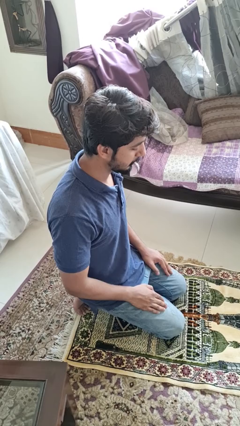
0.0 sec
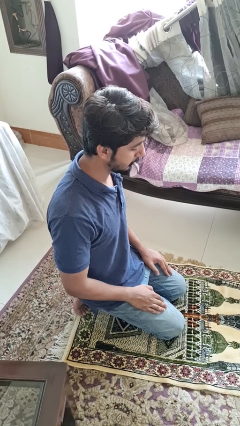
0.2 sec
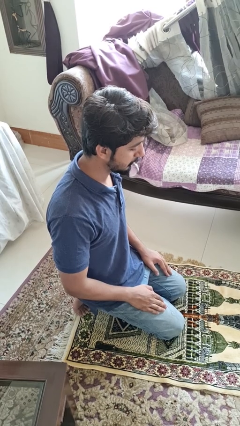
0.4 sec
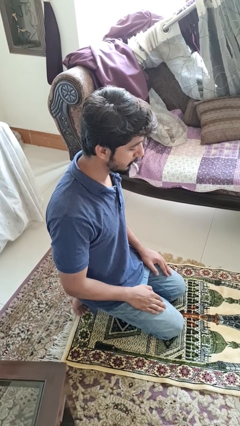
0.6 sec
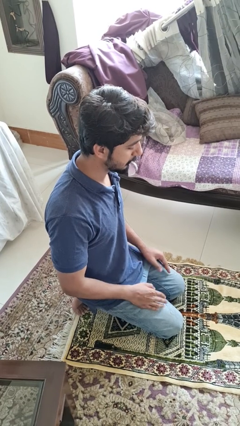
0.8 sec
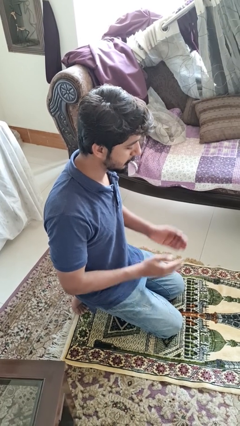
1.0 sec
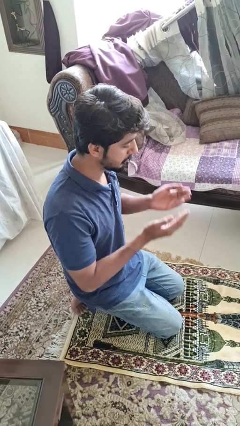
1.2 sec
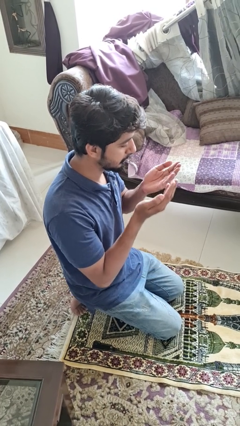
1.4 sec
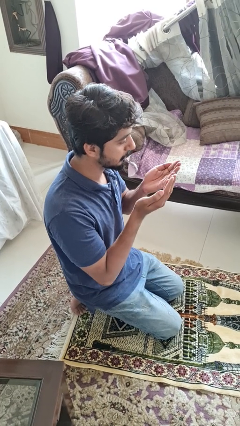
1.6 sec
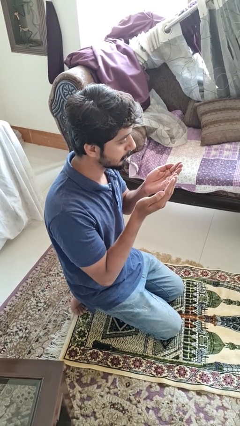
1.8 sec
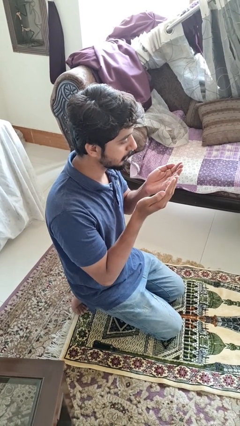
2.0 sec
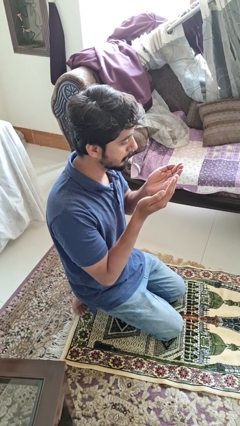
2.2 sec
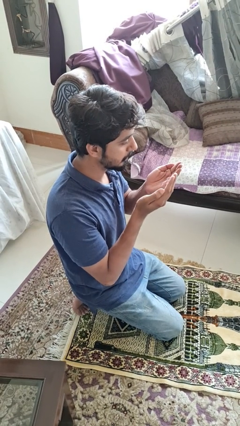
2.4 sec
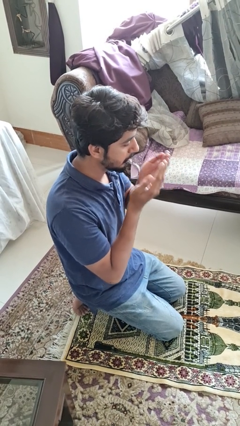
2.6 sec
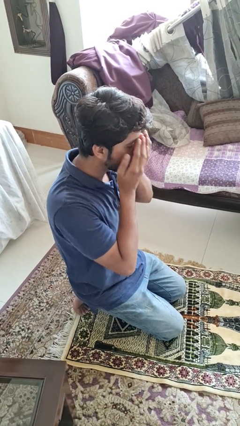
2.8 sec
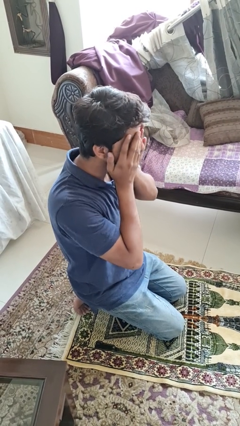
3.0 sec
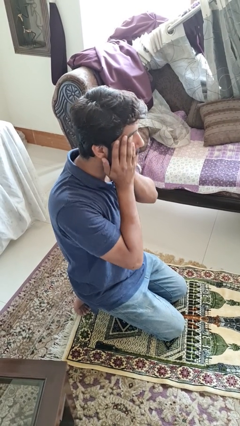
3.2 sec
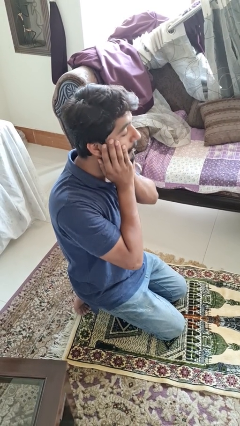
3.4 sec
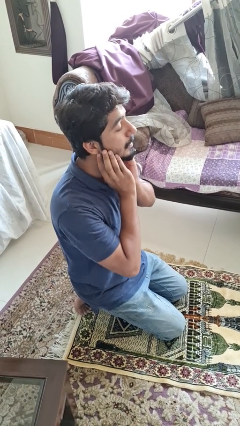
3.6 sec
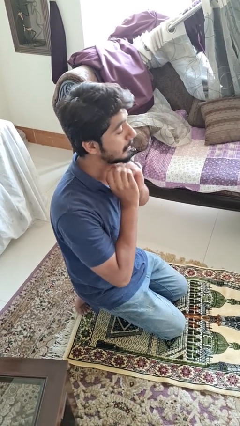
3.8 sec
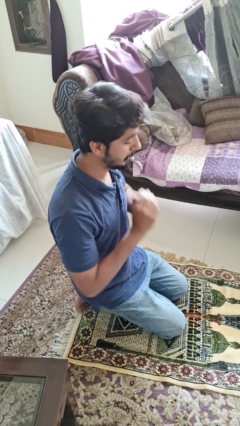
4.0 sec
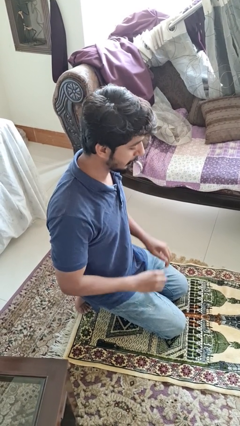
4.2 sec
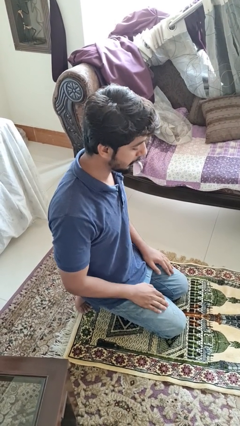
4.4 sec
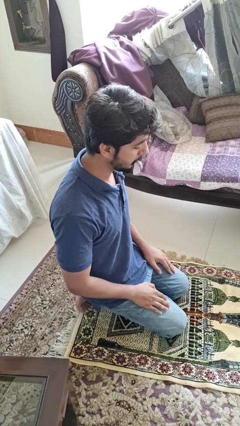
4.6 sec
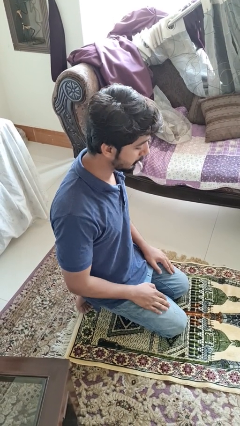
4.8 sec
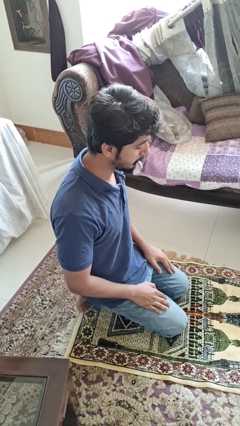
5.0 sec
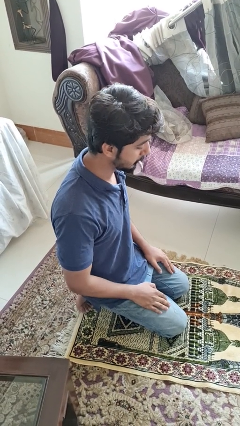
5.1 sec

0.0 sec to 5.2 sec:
person prays

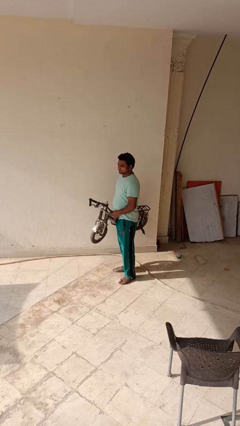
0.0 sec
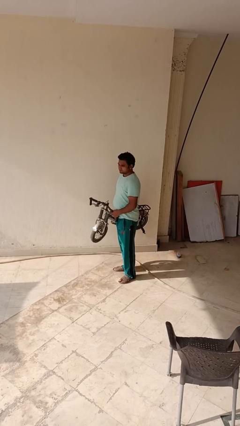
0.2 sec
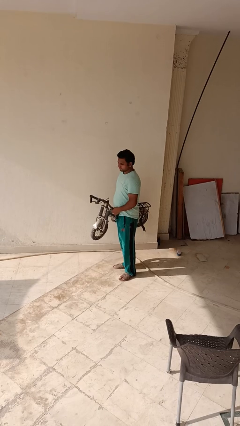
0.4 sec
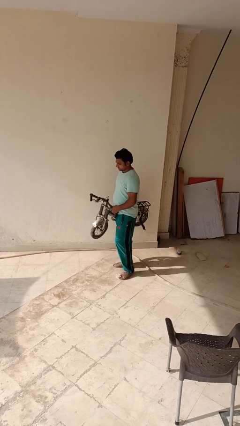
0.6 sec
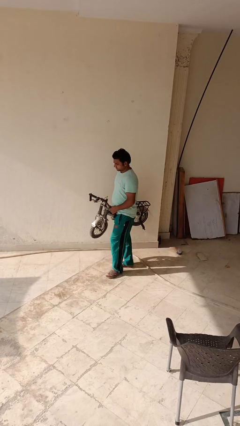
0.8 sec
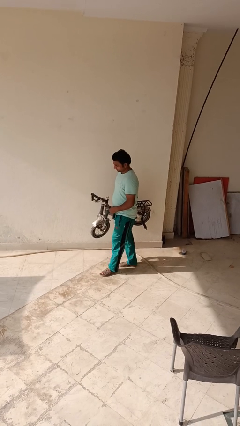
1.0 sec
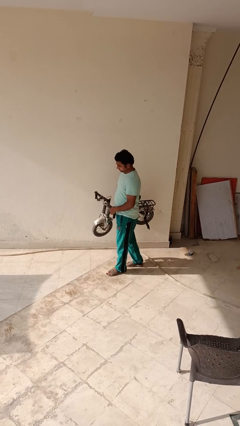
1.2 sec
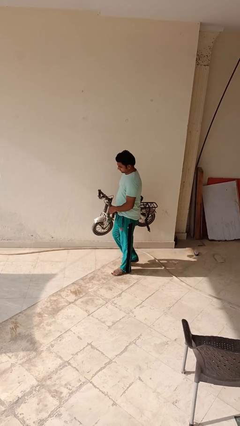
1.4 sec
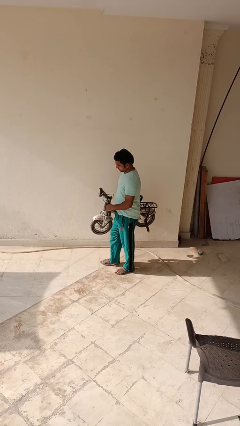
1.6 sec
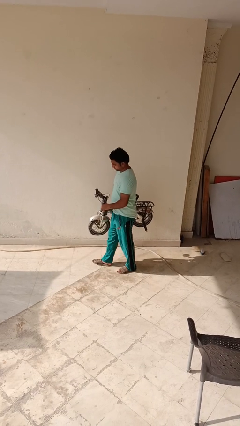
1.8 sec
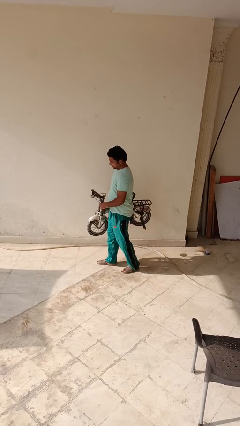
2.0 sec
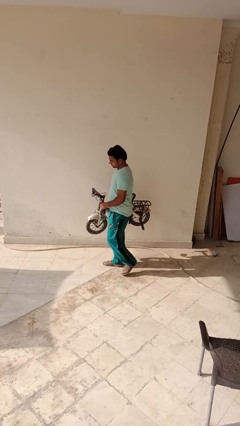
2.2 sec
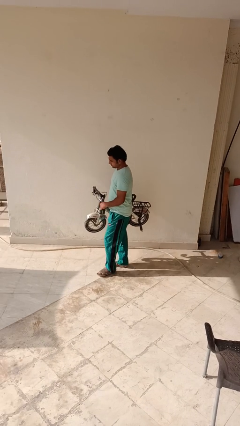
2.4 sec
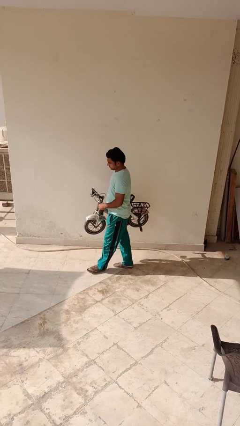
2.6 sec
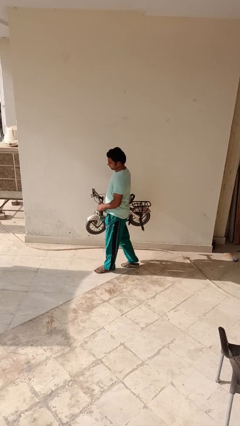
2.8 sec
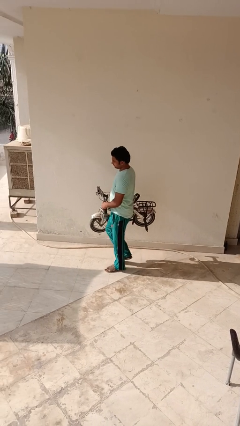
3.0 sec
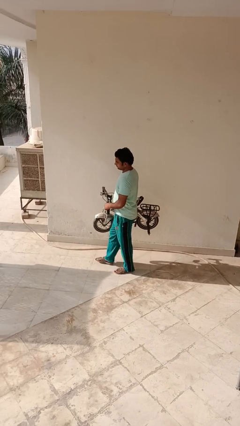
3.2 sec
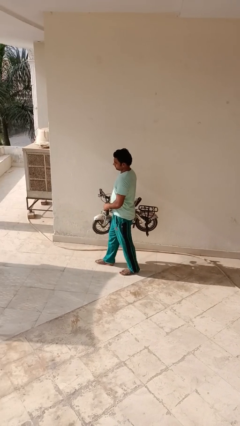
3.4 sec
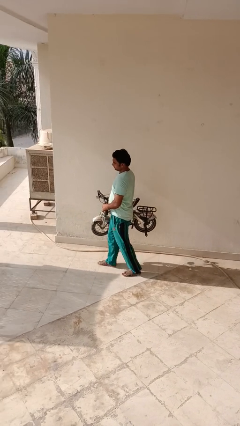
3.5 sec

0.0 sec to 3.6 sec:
person carries bicycle

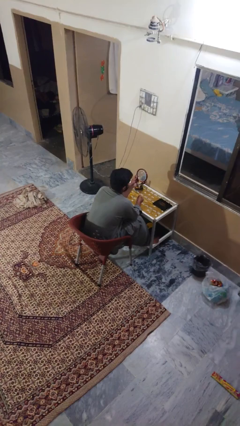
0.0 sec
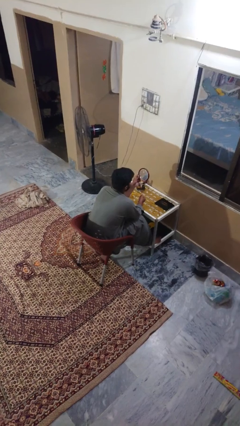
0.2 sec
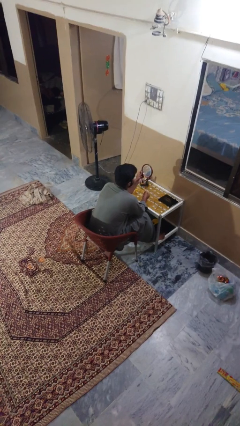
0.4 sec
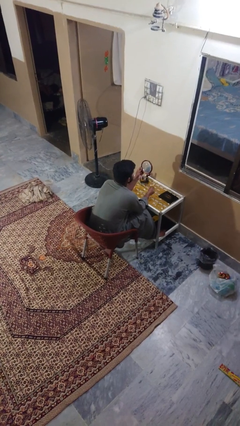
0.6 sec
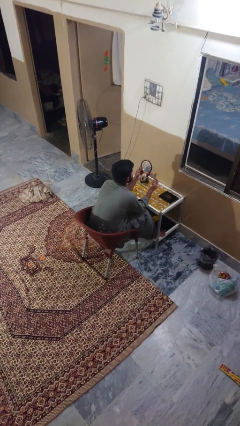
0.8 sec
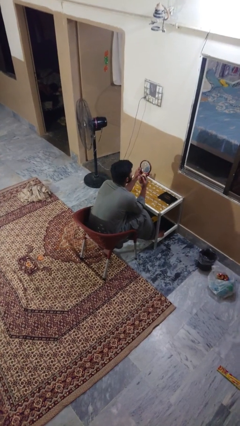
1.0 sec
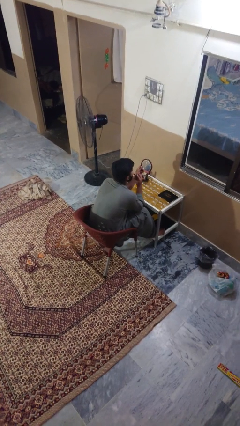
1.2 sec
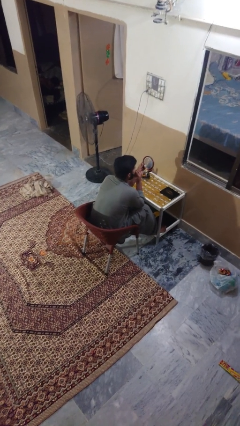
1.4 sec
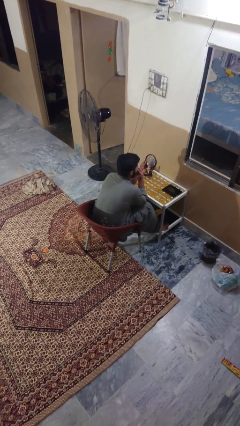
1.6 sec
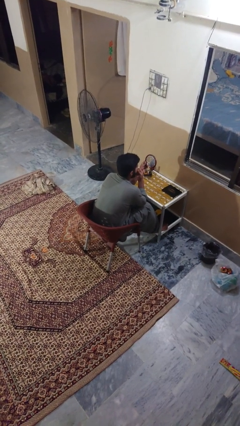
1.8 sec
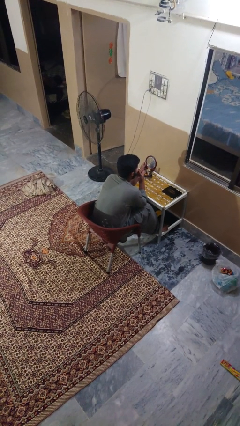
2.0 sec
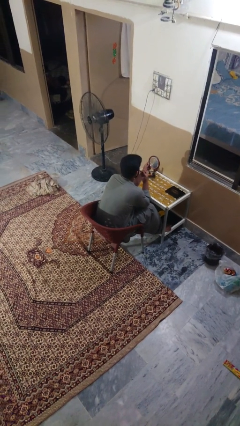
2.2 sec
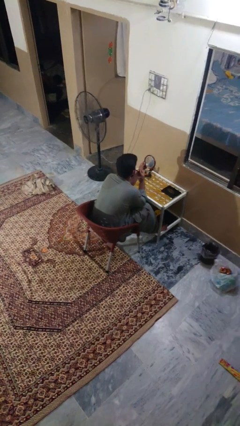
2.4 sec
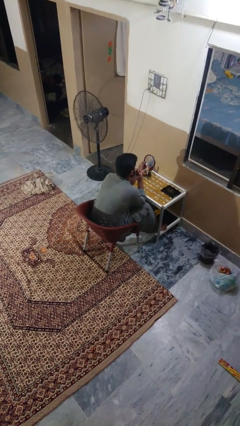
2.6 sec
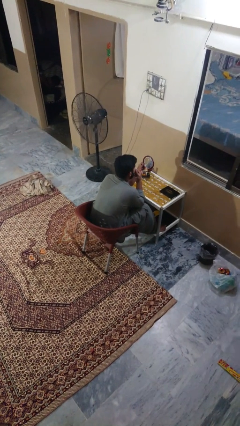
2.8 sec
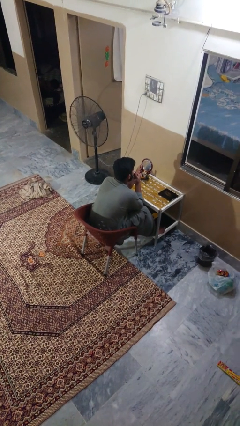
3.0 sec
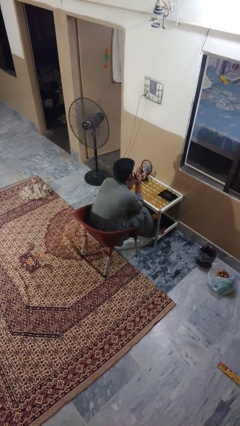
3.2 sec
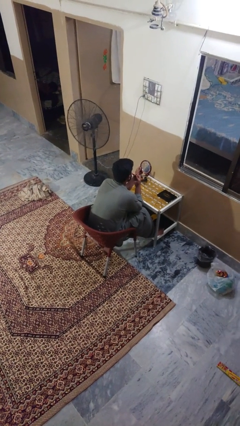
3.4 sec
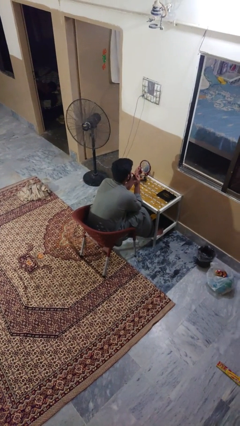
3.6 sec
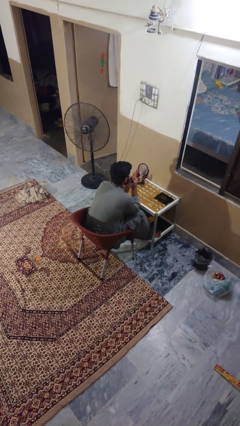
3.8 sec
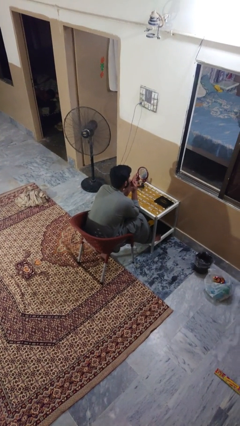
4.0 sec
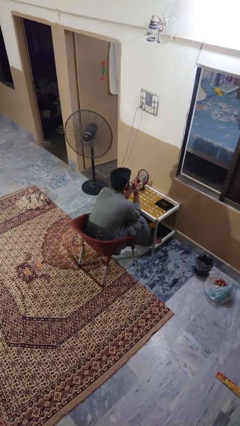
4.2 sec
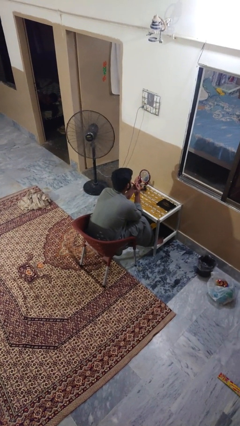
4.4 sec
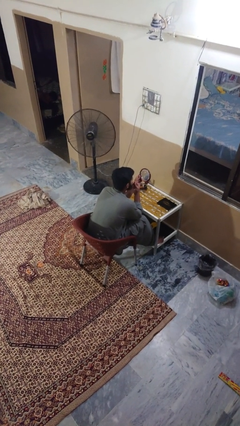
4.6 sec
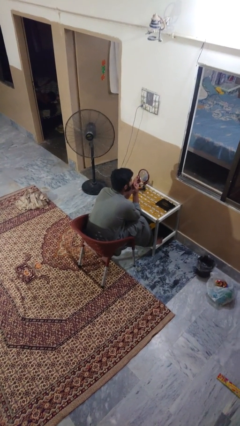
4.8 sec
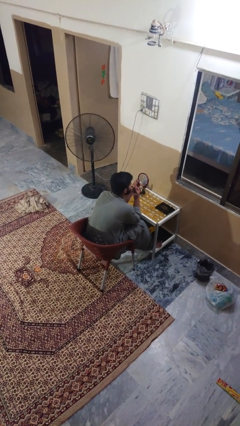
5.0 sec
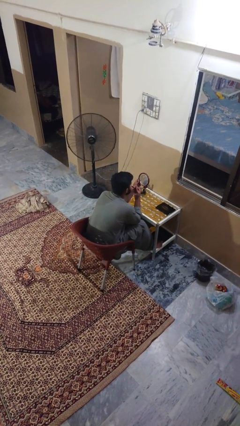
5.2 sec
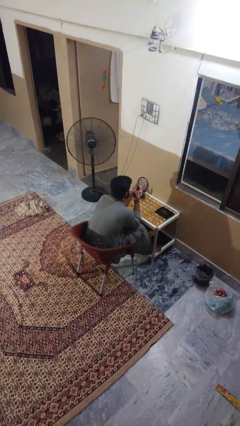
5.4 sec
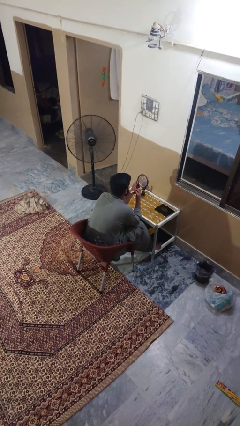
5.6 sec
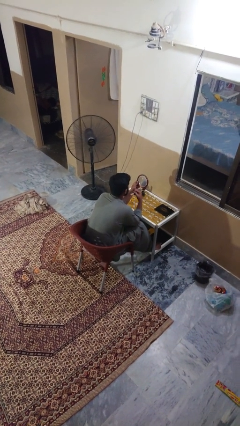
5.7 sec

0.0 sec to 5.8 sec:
person applies lip makeup

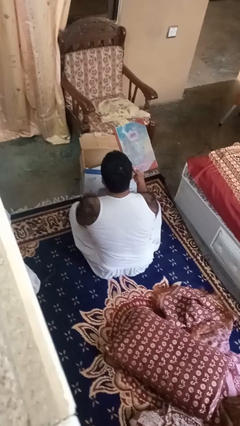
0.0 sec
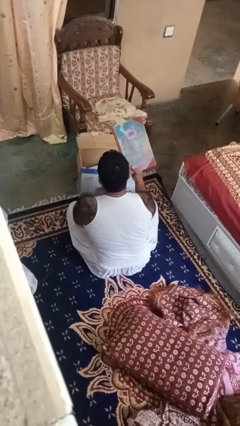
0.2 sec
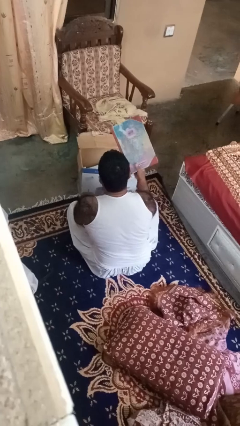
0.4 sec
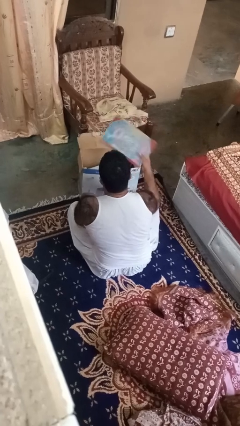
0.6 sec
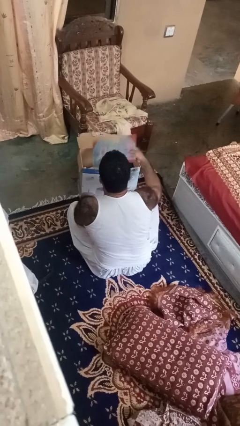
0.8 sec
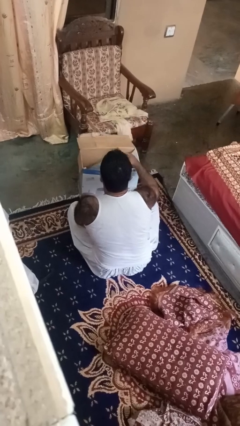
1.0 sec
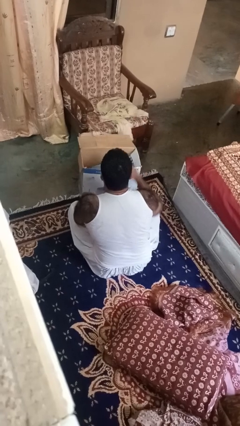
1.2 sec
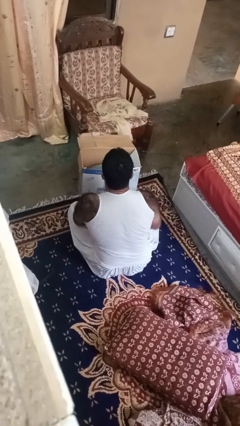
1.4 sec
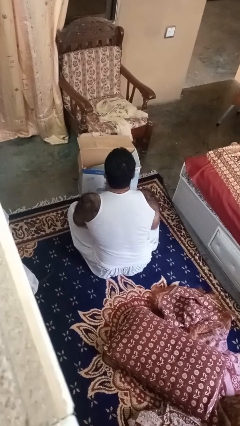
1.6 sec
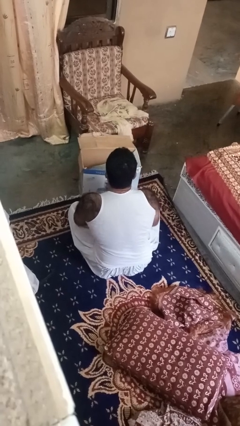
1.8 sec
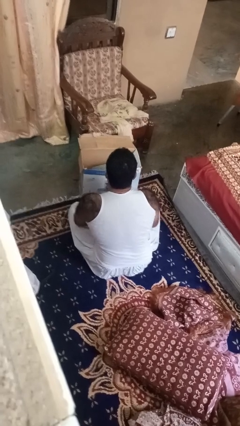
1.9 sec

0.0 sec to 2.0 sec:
person puts object into box

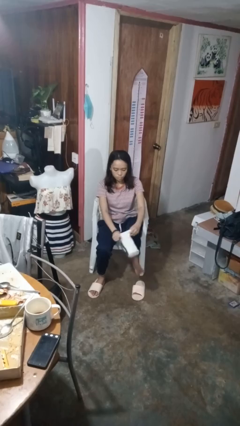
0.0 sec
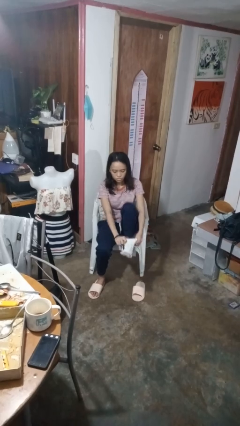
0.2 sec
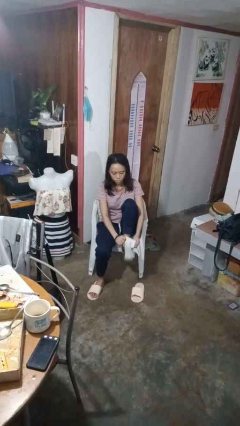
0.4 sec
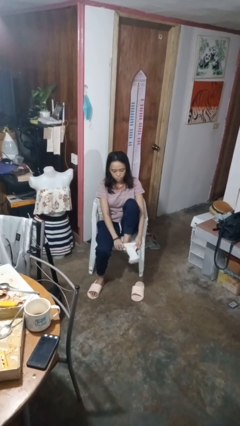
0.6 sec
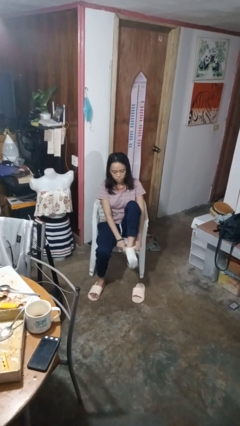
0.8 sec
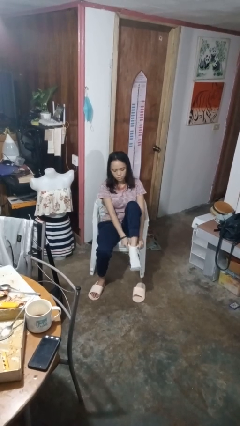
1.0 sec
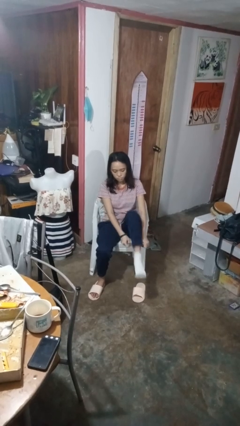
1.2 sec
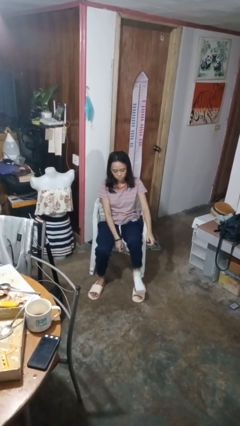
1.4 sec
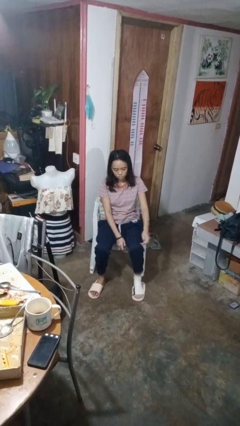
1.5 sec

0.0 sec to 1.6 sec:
person puts on socks
